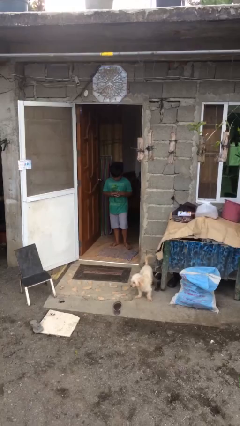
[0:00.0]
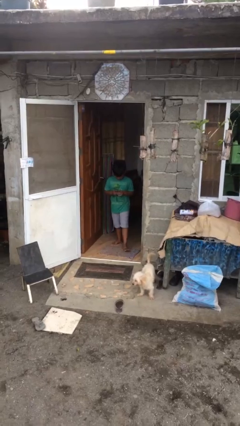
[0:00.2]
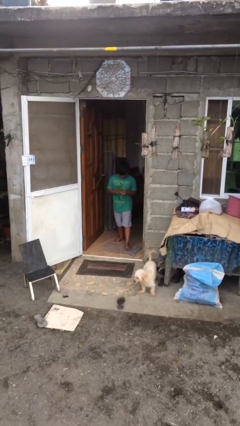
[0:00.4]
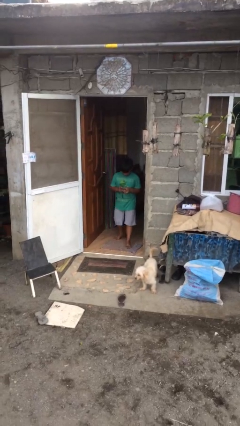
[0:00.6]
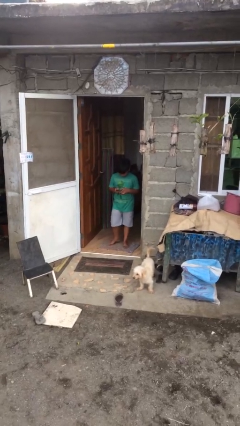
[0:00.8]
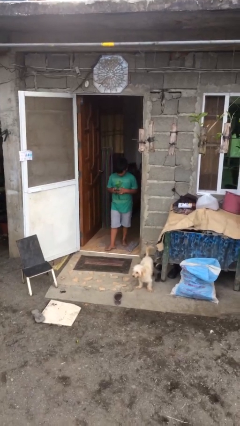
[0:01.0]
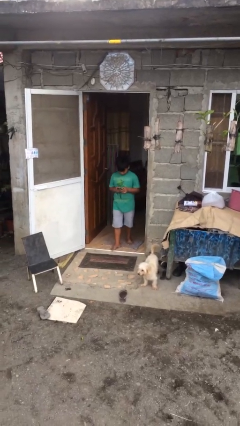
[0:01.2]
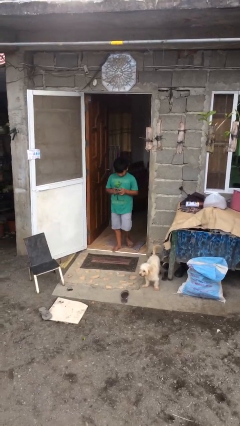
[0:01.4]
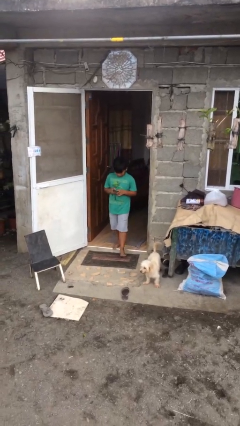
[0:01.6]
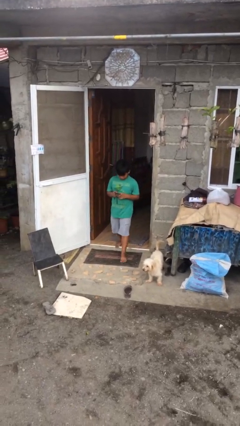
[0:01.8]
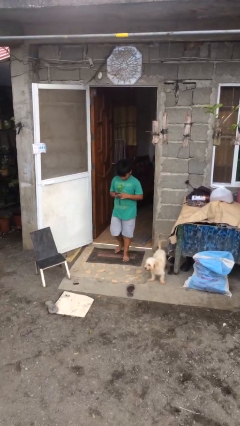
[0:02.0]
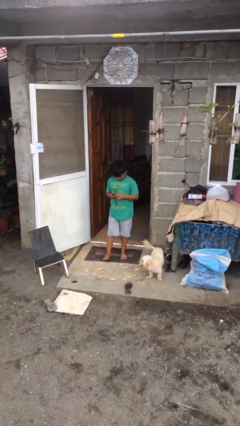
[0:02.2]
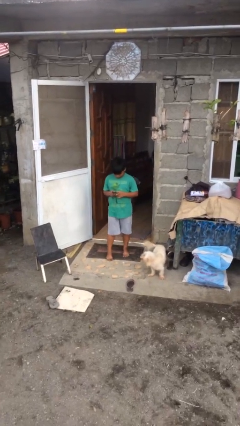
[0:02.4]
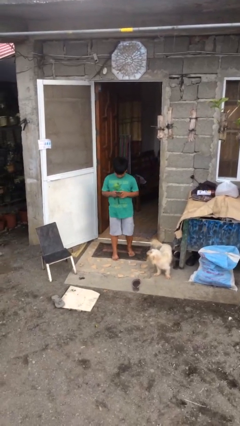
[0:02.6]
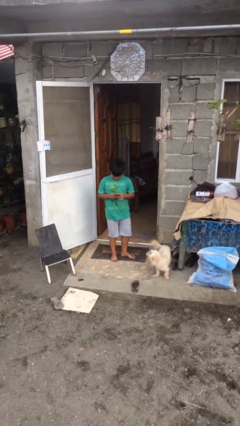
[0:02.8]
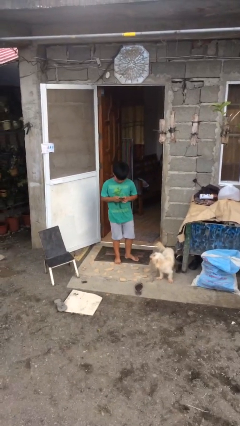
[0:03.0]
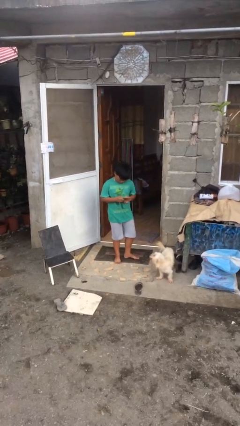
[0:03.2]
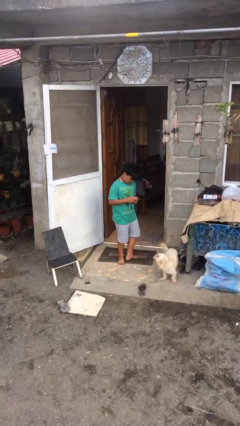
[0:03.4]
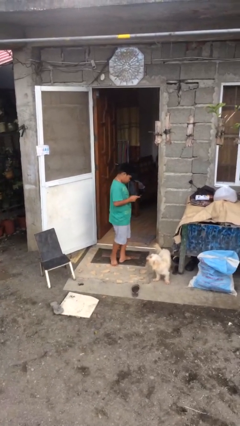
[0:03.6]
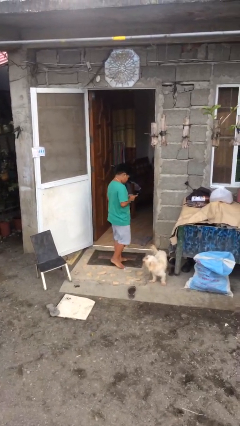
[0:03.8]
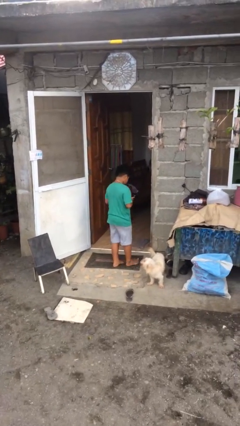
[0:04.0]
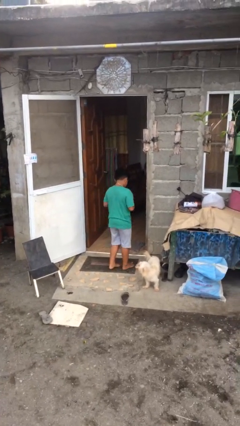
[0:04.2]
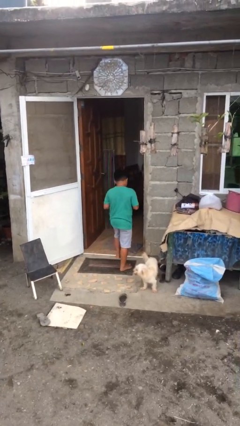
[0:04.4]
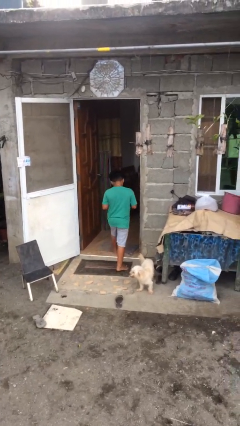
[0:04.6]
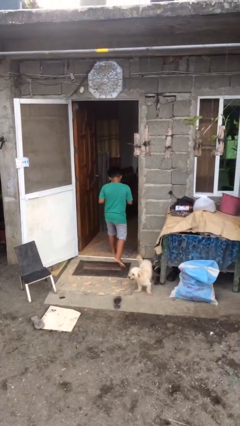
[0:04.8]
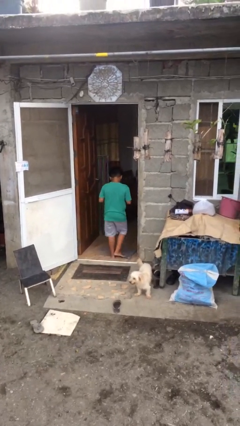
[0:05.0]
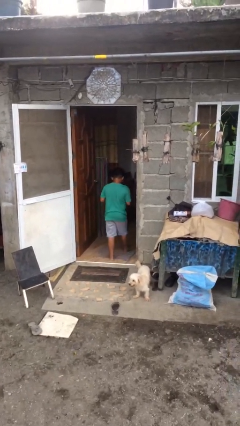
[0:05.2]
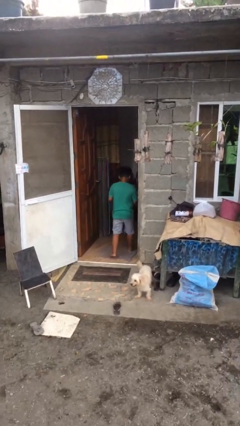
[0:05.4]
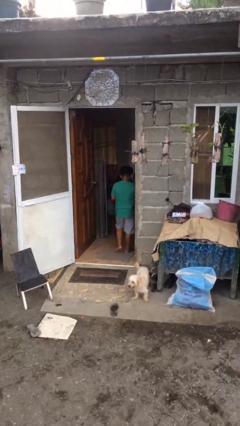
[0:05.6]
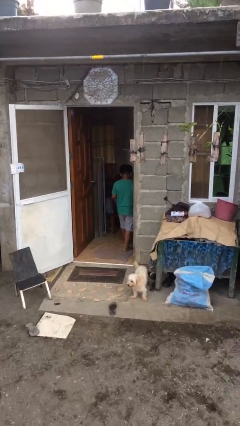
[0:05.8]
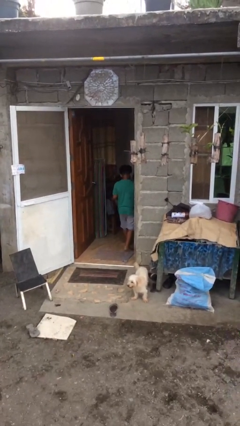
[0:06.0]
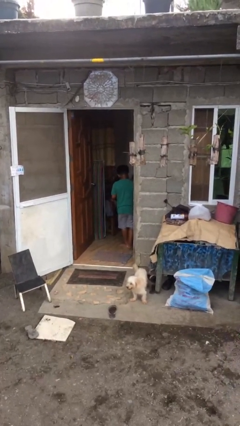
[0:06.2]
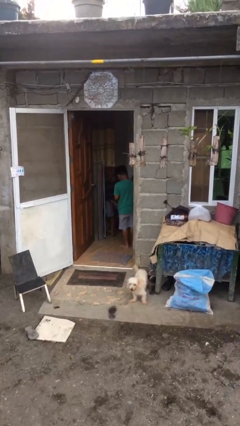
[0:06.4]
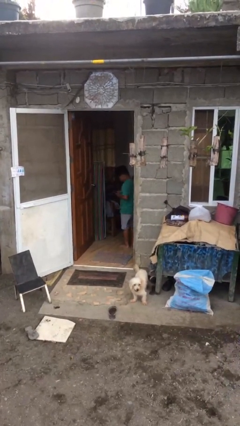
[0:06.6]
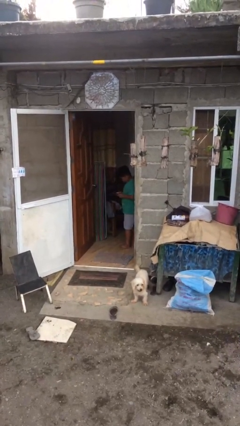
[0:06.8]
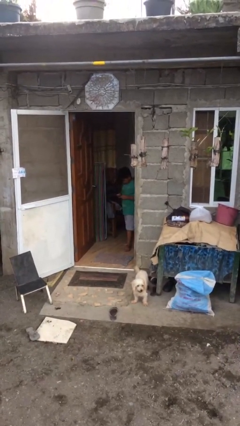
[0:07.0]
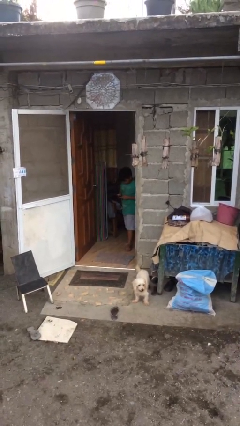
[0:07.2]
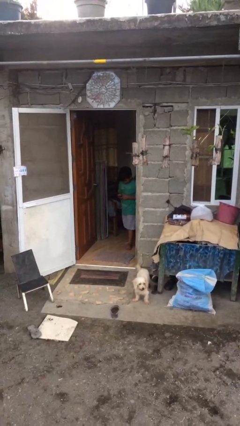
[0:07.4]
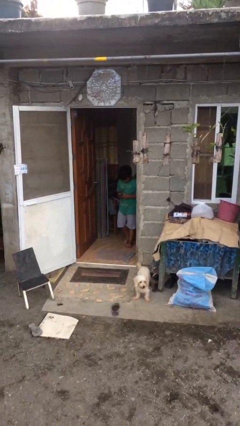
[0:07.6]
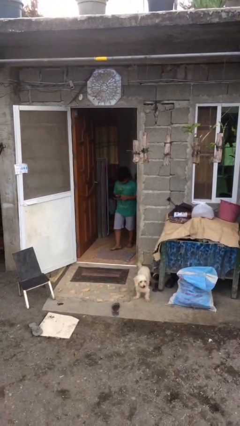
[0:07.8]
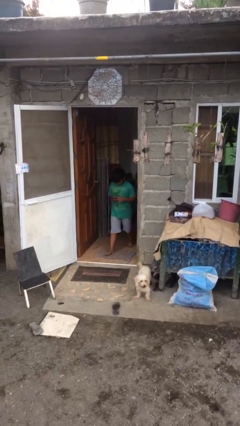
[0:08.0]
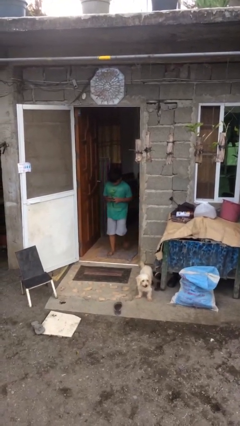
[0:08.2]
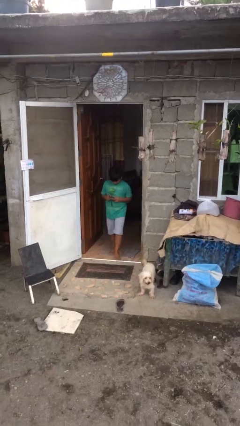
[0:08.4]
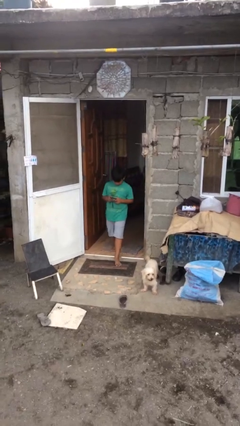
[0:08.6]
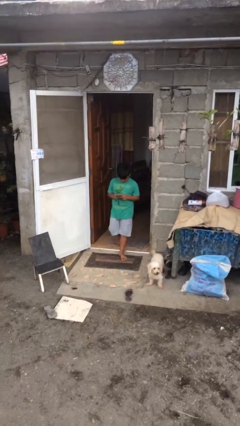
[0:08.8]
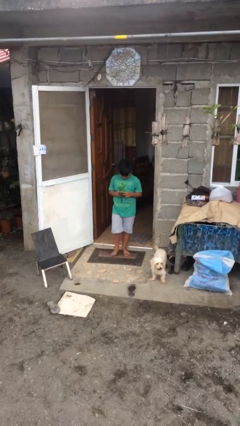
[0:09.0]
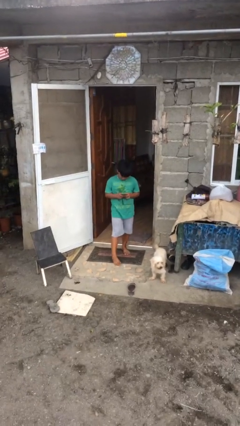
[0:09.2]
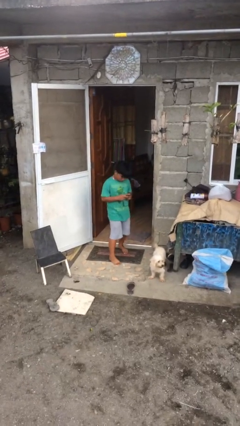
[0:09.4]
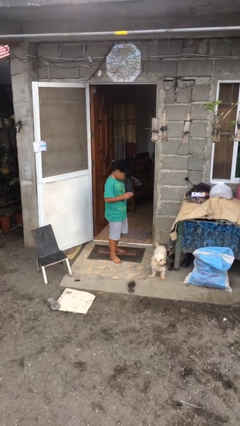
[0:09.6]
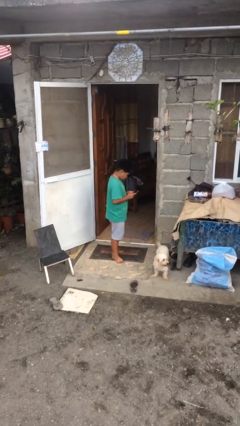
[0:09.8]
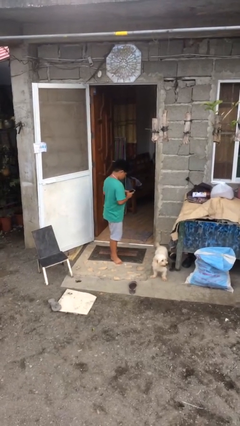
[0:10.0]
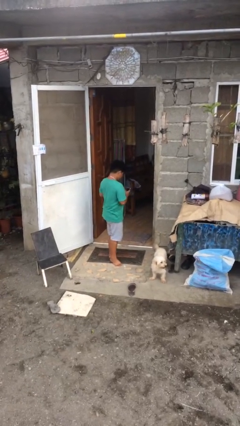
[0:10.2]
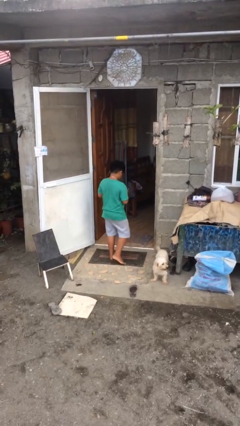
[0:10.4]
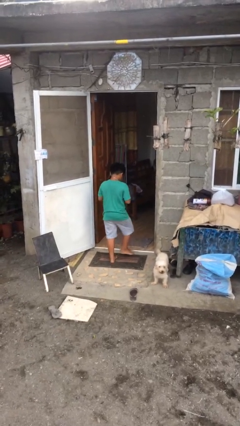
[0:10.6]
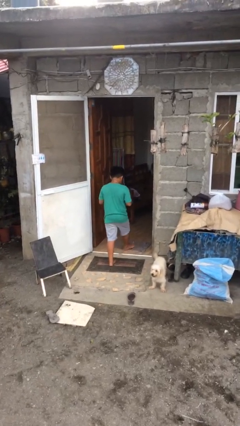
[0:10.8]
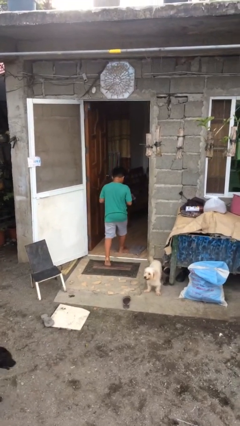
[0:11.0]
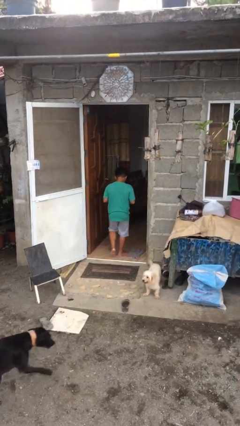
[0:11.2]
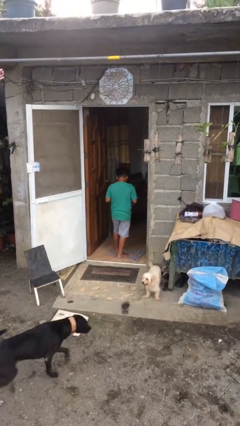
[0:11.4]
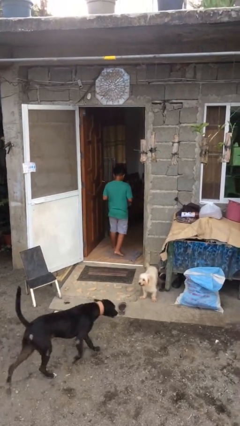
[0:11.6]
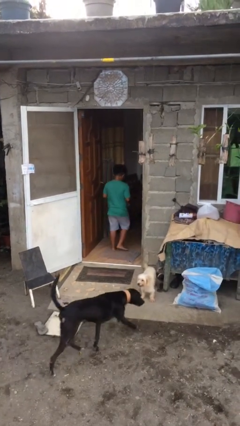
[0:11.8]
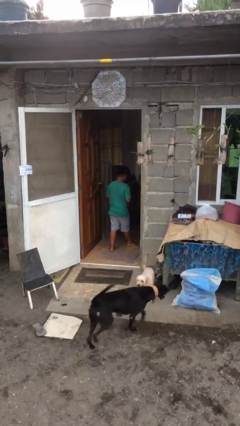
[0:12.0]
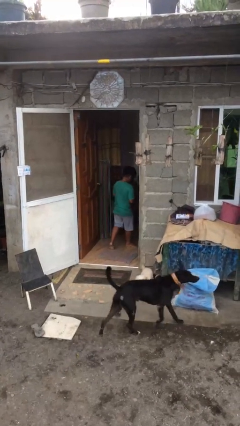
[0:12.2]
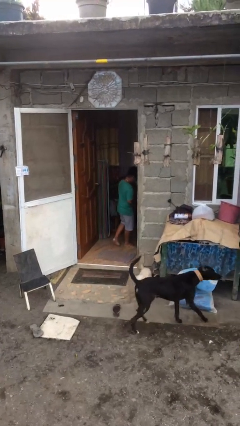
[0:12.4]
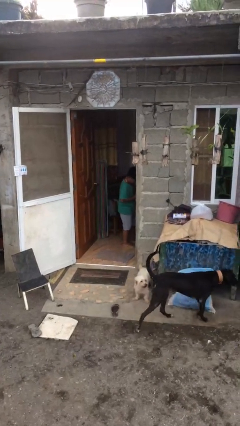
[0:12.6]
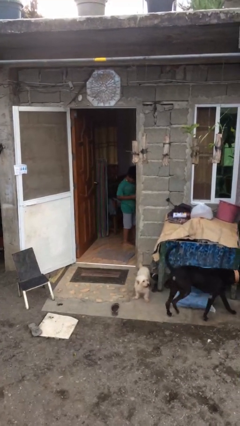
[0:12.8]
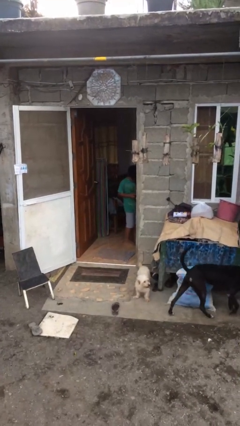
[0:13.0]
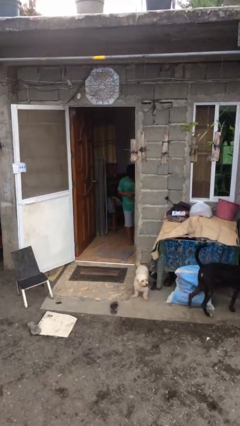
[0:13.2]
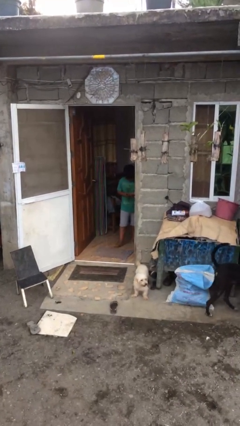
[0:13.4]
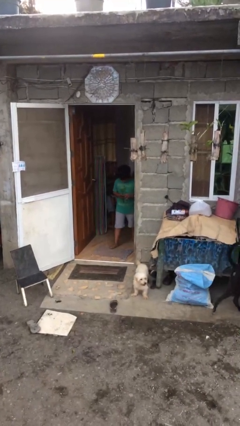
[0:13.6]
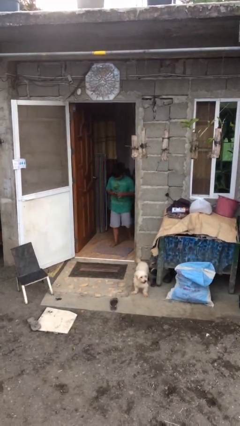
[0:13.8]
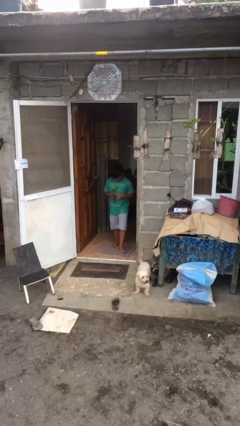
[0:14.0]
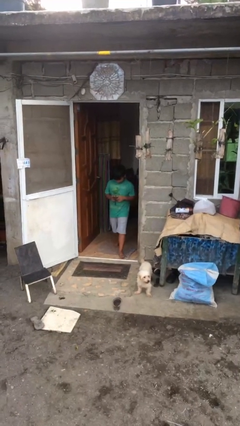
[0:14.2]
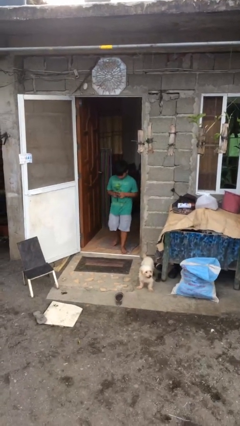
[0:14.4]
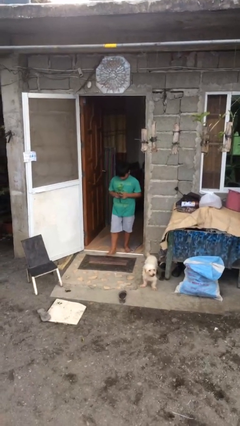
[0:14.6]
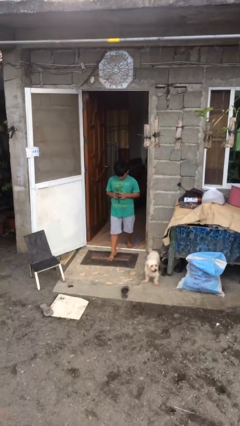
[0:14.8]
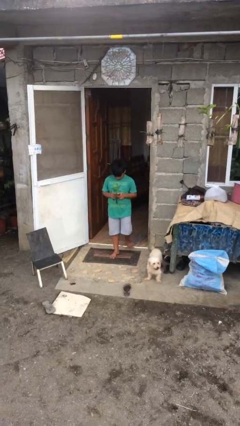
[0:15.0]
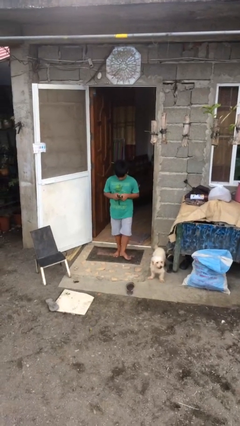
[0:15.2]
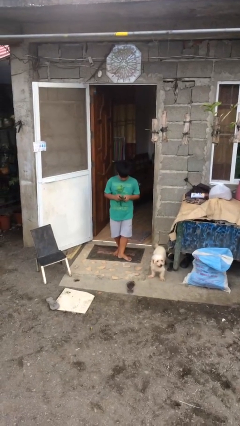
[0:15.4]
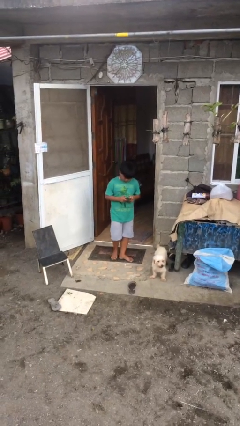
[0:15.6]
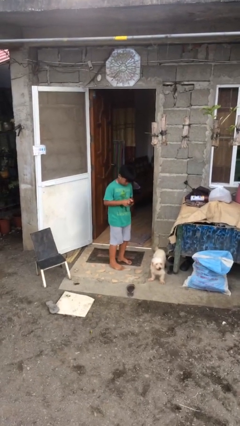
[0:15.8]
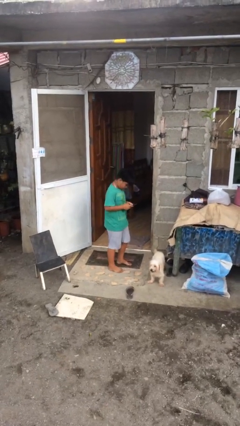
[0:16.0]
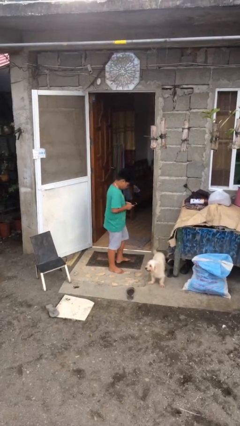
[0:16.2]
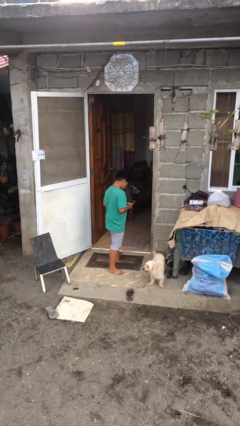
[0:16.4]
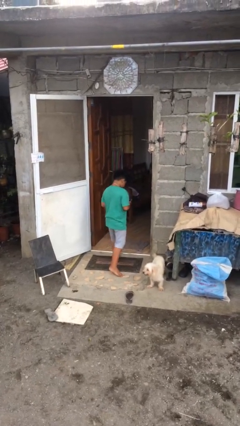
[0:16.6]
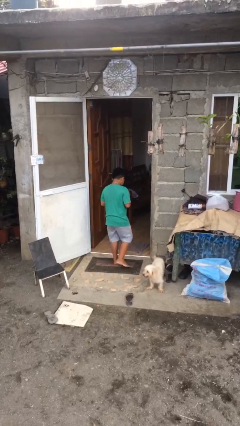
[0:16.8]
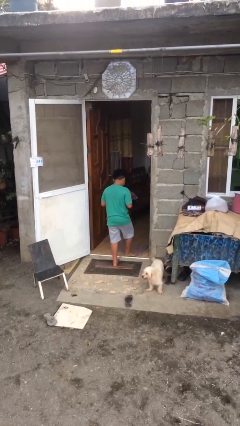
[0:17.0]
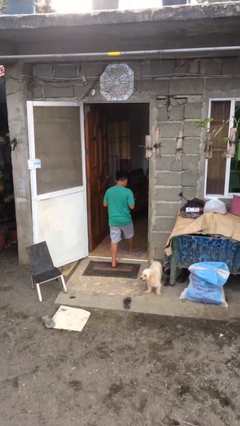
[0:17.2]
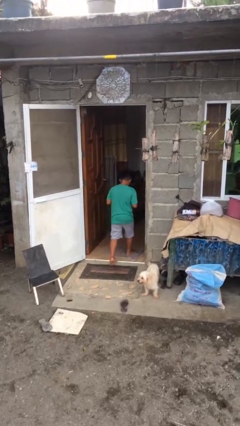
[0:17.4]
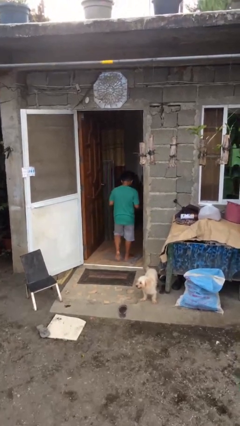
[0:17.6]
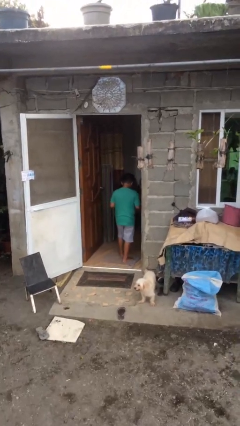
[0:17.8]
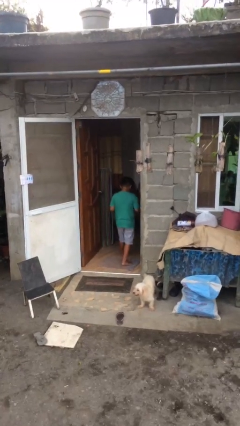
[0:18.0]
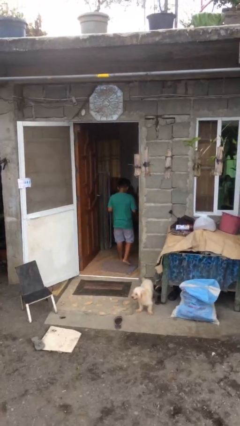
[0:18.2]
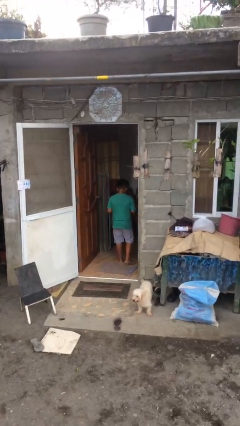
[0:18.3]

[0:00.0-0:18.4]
person texts on phone
